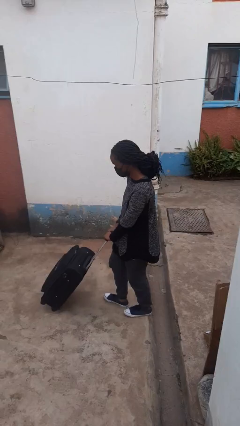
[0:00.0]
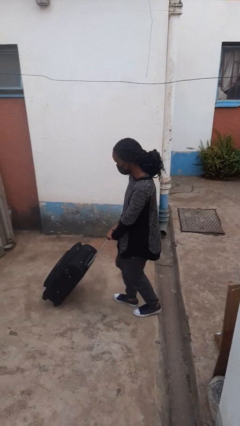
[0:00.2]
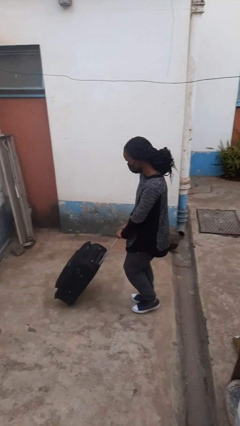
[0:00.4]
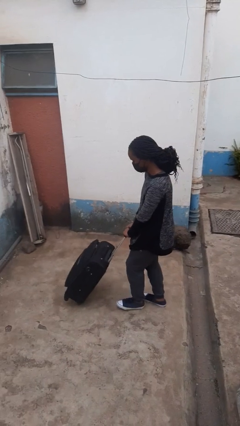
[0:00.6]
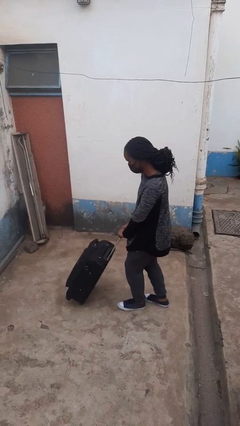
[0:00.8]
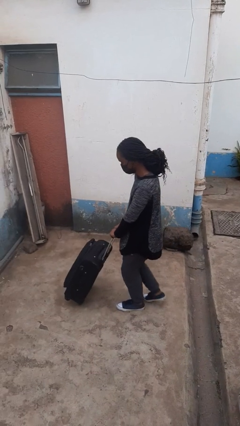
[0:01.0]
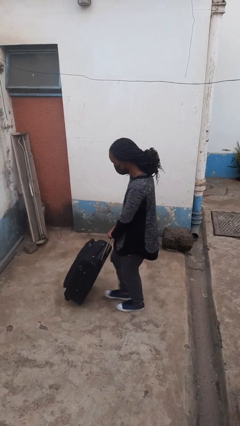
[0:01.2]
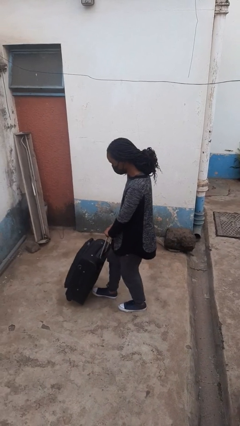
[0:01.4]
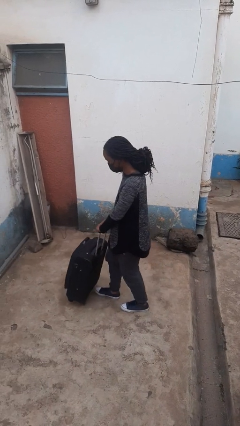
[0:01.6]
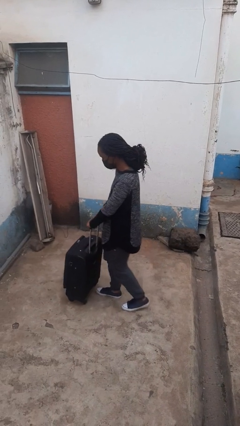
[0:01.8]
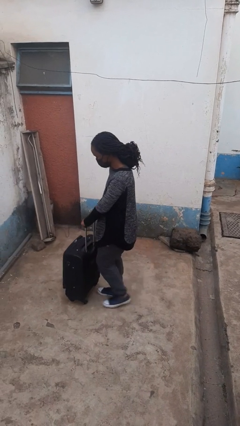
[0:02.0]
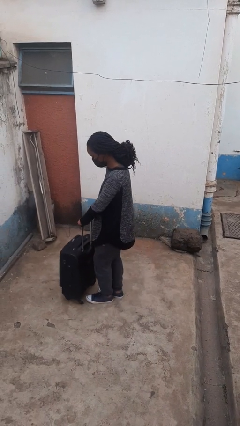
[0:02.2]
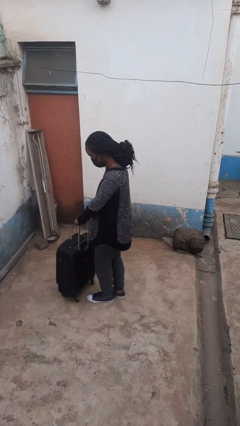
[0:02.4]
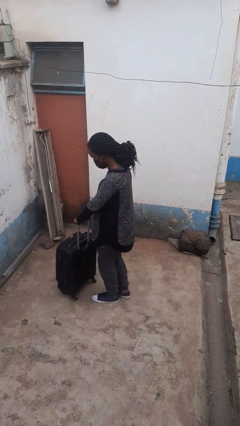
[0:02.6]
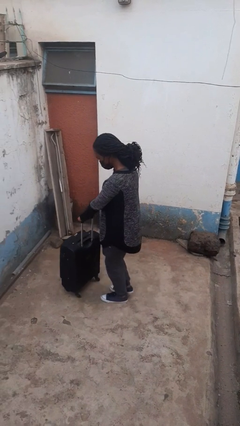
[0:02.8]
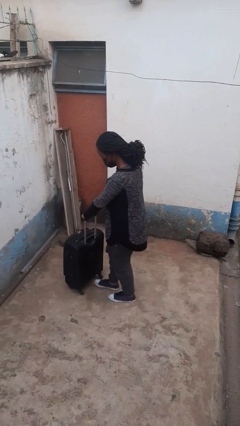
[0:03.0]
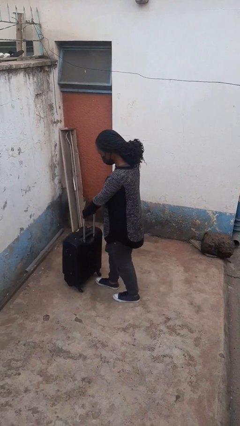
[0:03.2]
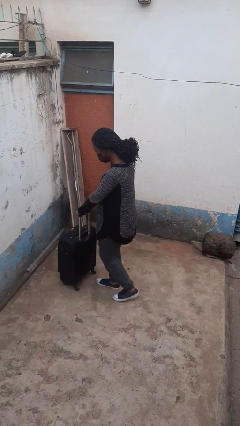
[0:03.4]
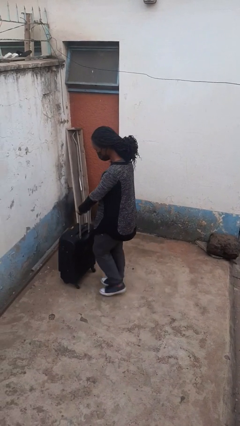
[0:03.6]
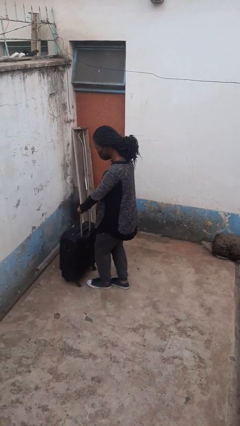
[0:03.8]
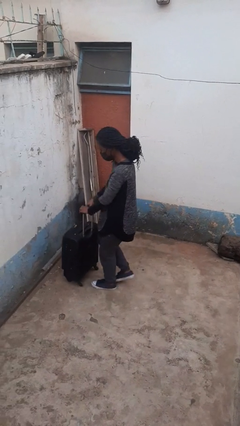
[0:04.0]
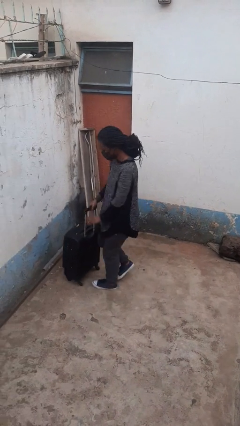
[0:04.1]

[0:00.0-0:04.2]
person pushes wheeled cart

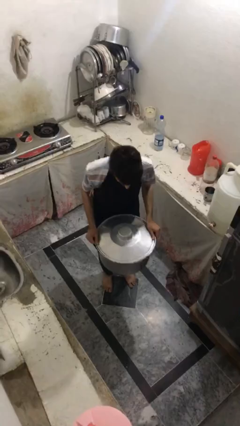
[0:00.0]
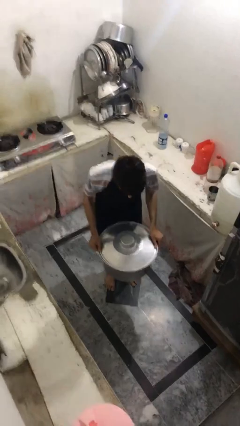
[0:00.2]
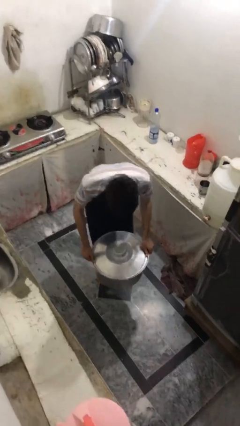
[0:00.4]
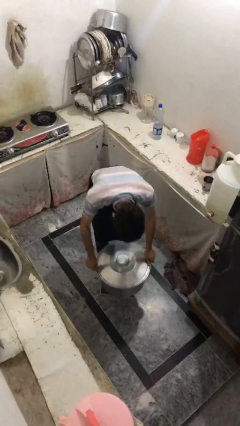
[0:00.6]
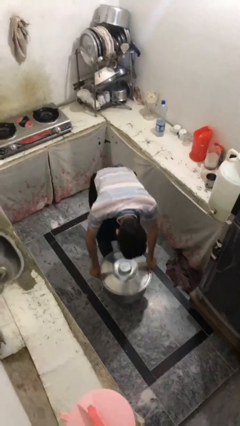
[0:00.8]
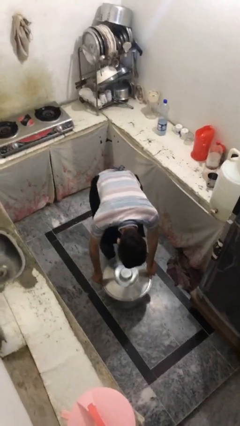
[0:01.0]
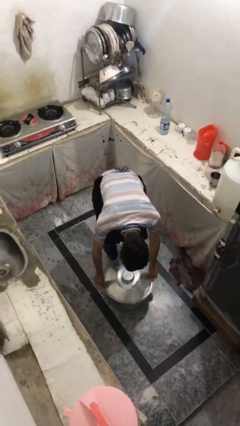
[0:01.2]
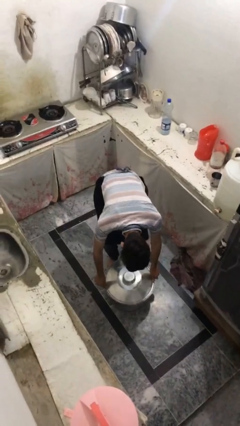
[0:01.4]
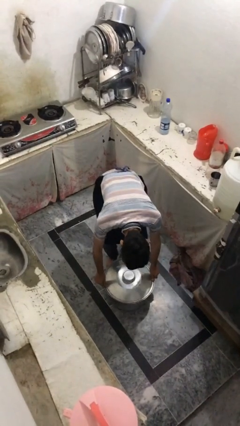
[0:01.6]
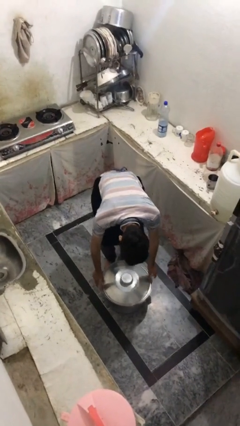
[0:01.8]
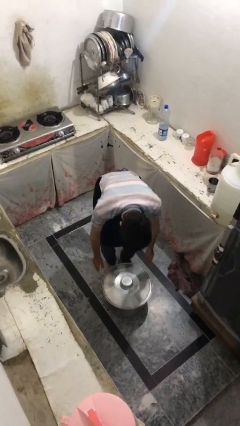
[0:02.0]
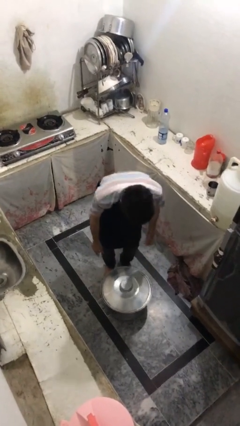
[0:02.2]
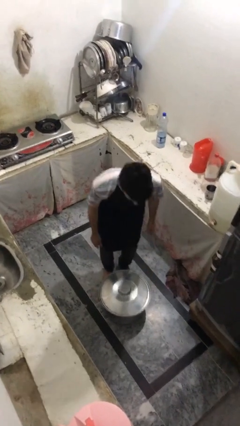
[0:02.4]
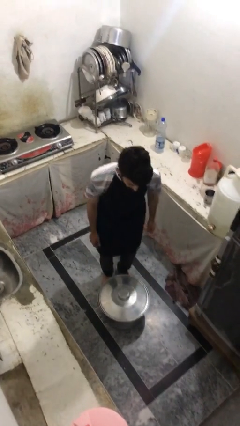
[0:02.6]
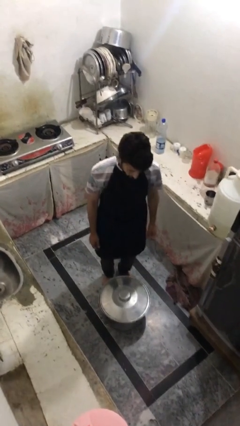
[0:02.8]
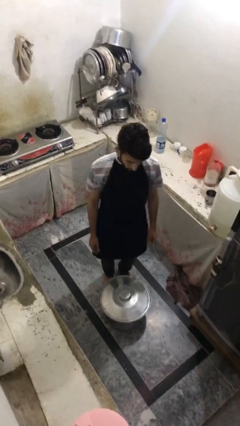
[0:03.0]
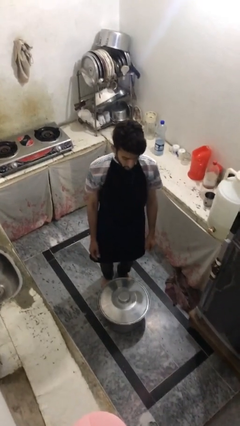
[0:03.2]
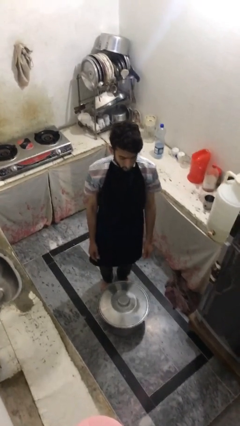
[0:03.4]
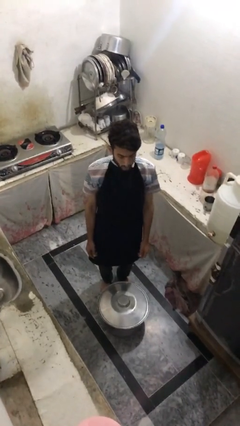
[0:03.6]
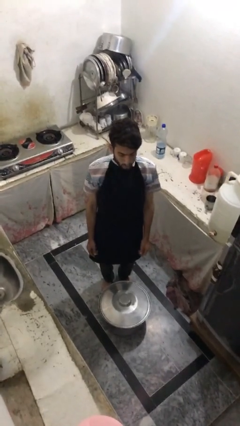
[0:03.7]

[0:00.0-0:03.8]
person puts down object on floor

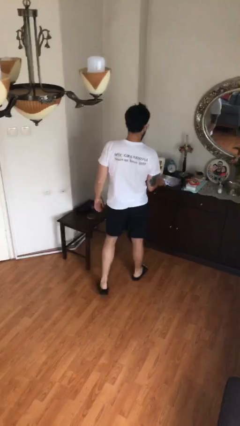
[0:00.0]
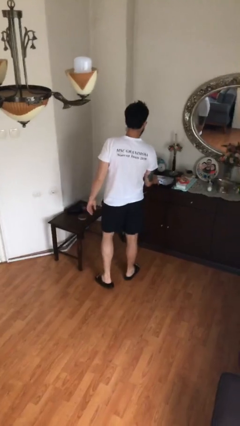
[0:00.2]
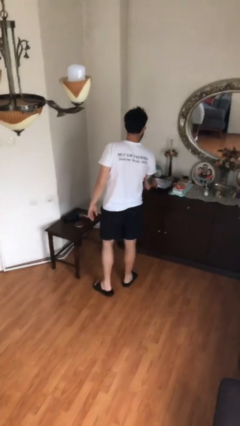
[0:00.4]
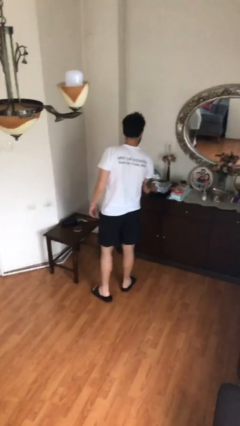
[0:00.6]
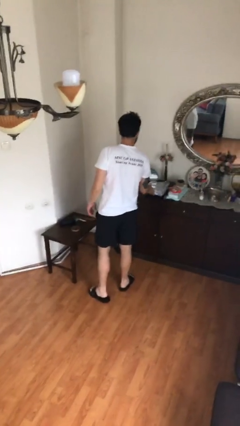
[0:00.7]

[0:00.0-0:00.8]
person puts down object on table

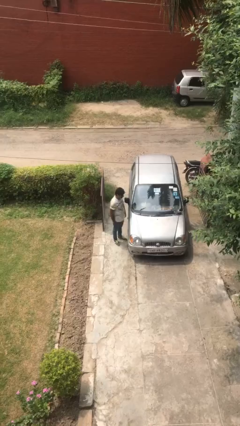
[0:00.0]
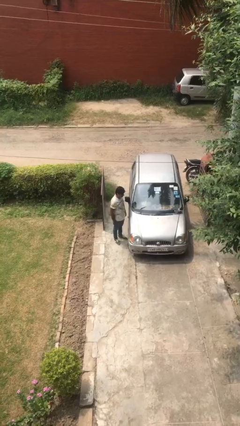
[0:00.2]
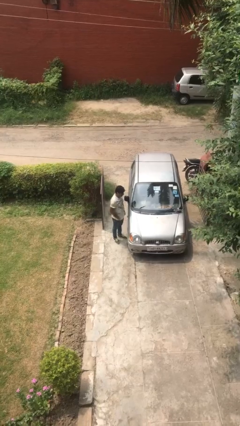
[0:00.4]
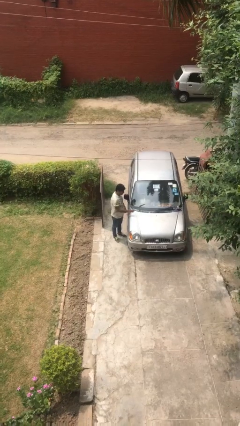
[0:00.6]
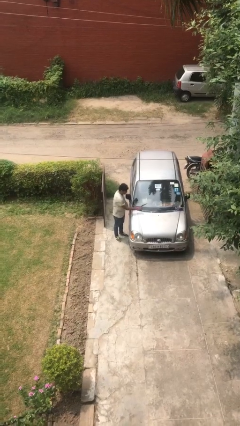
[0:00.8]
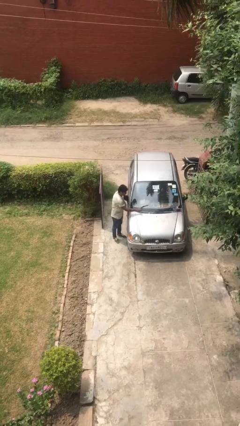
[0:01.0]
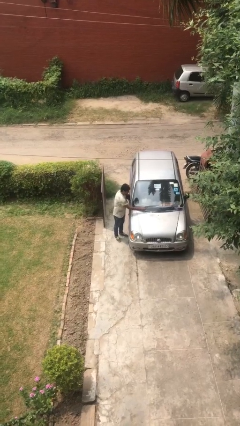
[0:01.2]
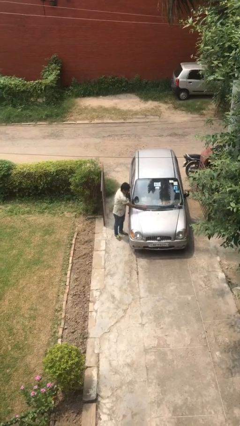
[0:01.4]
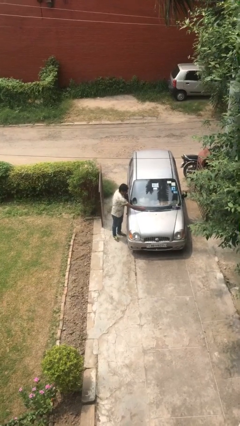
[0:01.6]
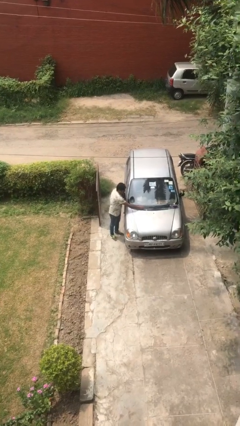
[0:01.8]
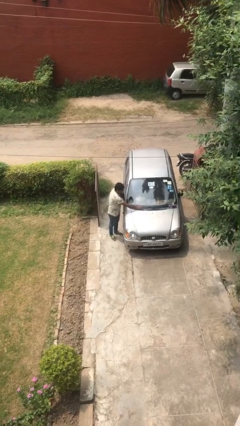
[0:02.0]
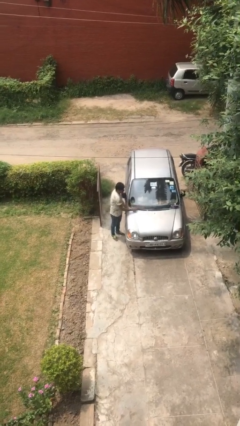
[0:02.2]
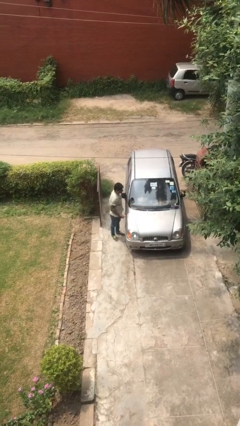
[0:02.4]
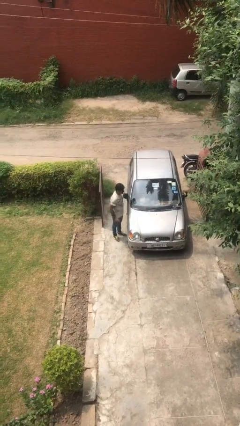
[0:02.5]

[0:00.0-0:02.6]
person flips down car wipers

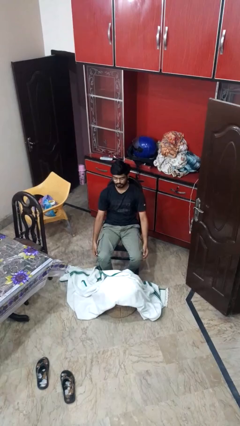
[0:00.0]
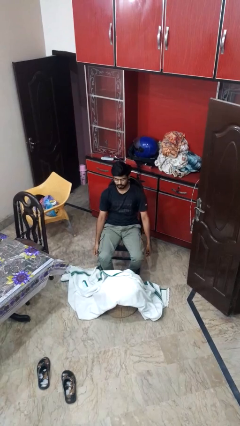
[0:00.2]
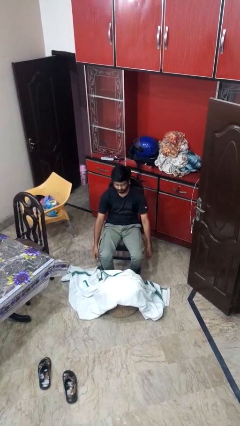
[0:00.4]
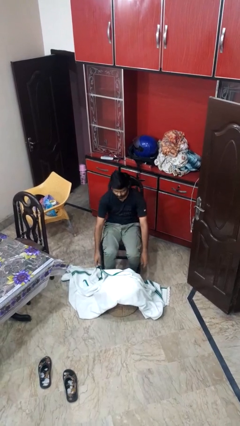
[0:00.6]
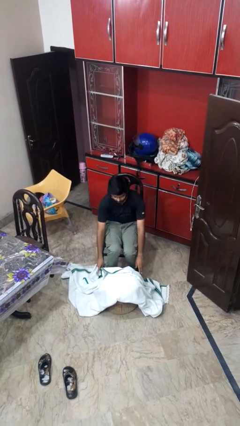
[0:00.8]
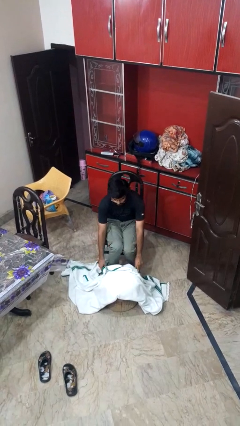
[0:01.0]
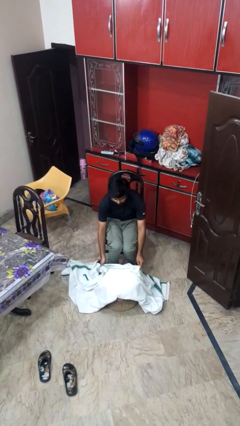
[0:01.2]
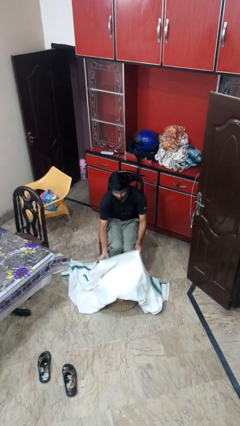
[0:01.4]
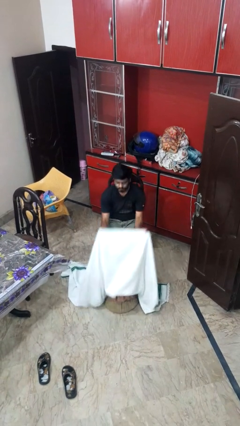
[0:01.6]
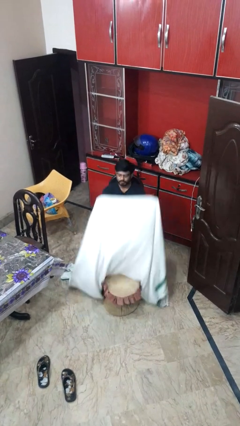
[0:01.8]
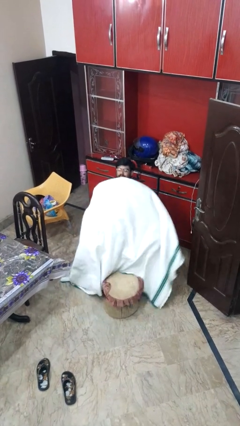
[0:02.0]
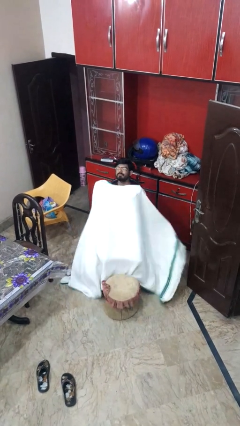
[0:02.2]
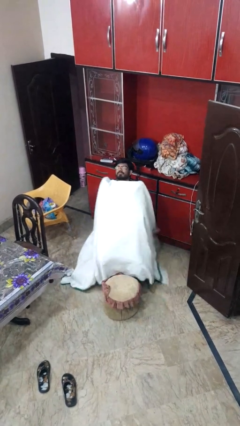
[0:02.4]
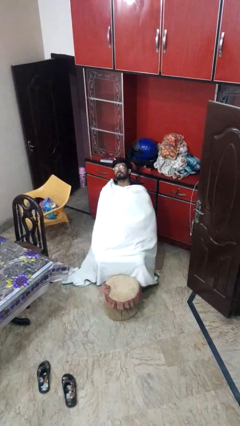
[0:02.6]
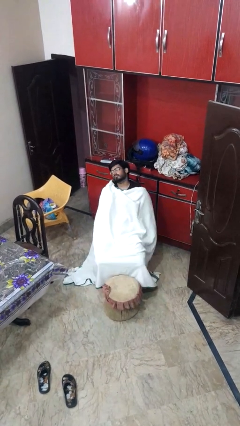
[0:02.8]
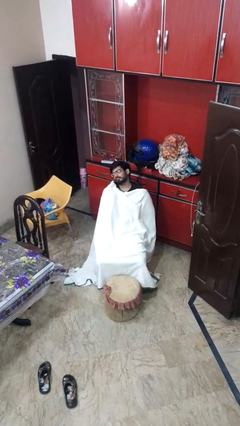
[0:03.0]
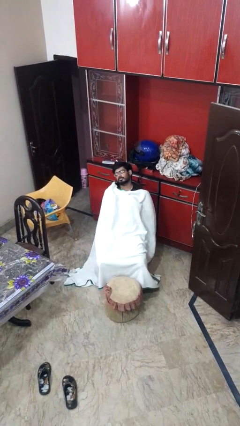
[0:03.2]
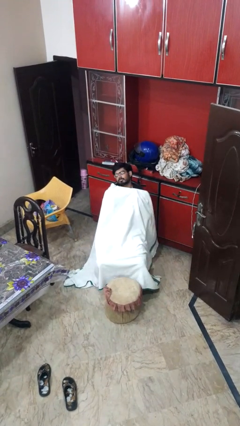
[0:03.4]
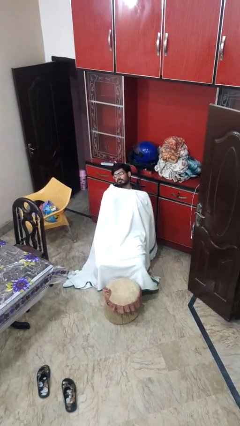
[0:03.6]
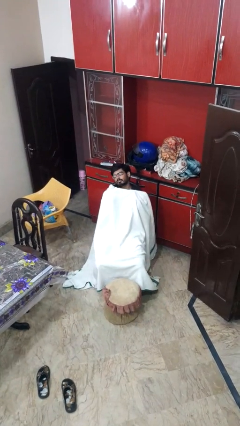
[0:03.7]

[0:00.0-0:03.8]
person covers with blanket

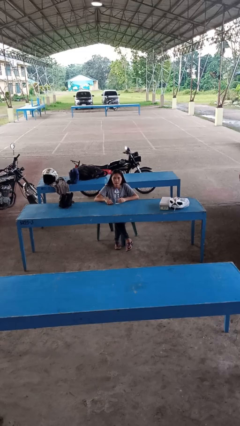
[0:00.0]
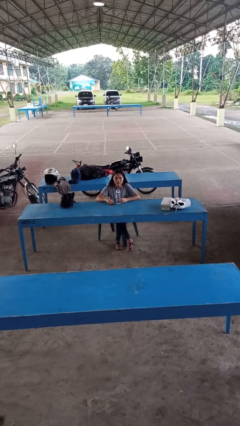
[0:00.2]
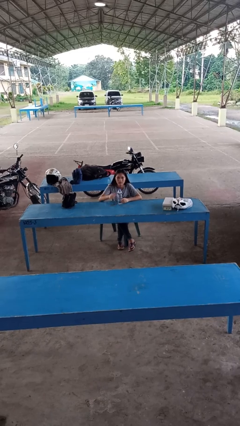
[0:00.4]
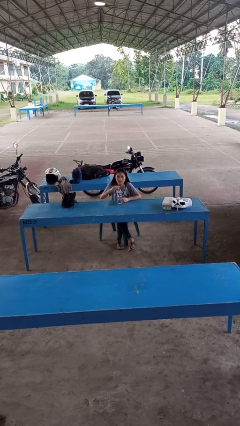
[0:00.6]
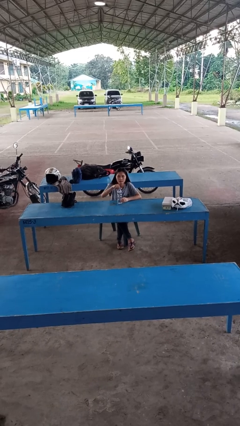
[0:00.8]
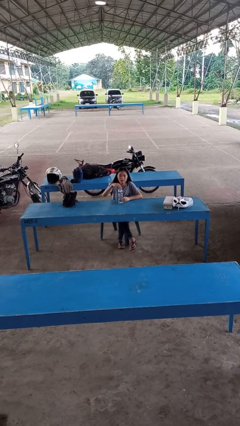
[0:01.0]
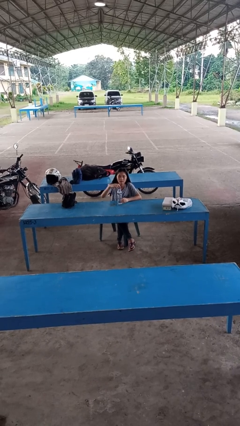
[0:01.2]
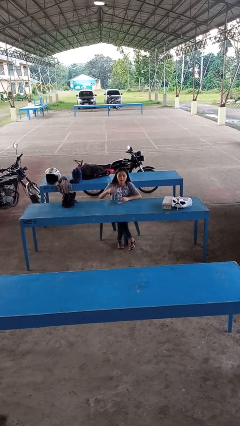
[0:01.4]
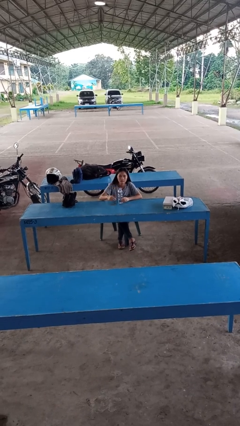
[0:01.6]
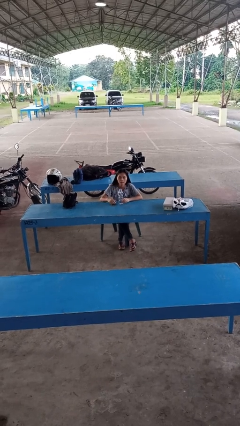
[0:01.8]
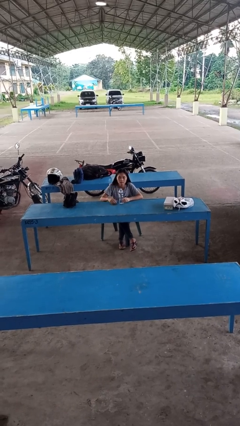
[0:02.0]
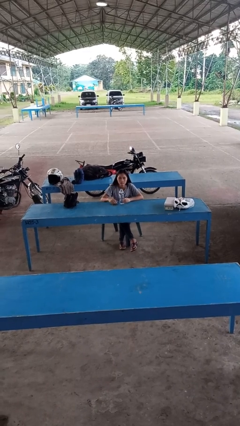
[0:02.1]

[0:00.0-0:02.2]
person unscrews lid from bottle
